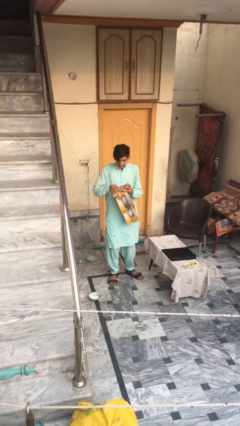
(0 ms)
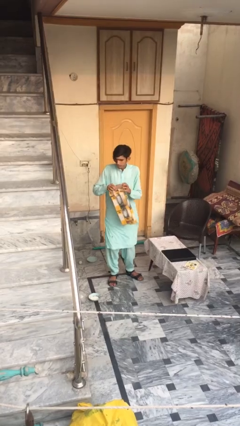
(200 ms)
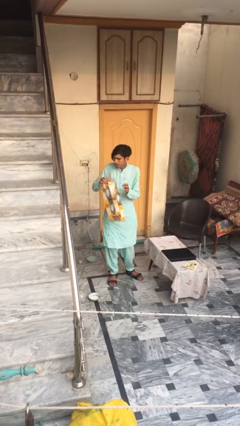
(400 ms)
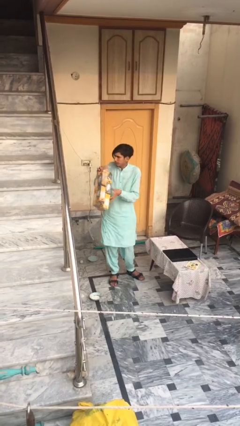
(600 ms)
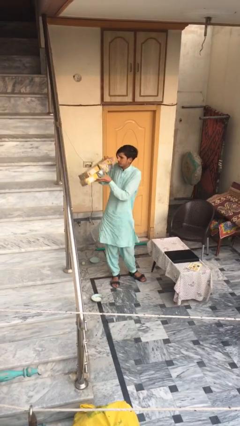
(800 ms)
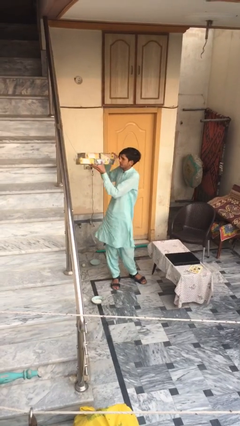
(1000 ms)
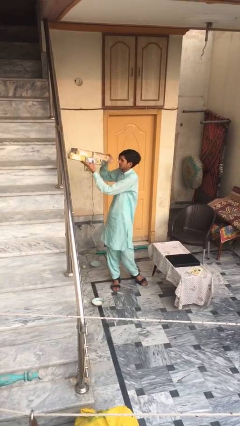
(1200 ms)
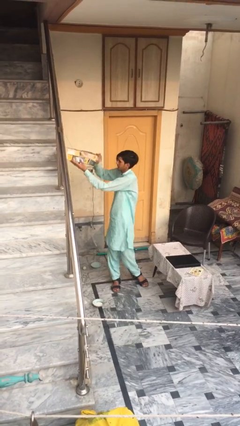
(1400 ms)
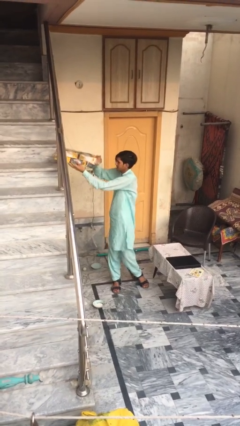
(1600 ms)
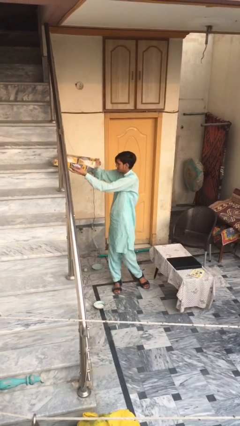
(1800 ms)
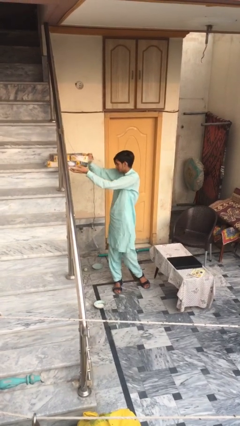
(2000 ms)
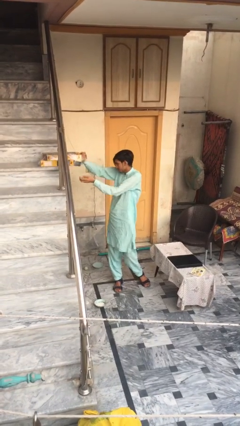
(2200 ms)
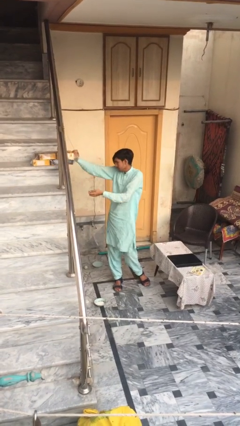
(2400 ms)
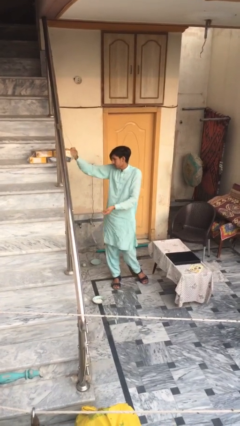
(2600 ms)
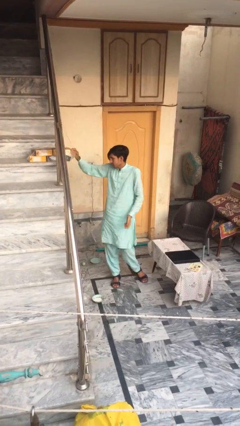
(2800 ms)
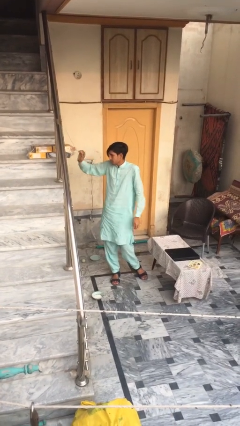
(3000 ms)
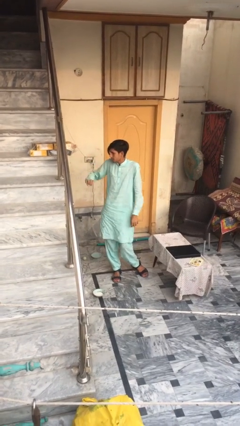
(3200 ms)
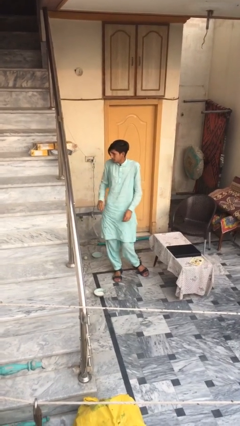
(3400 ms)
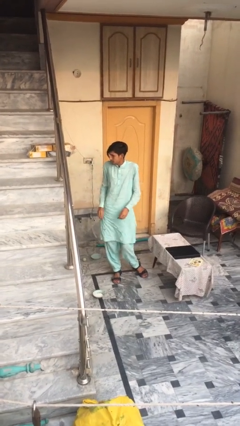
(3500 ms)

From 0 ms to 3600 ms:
person puts down object on shelf

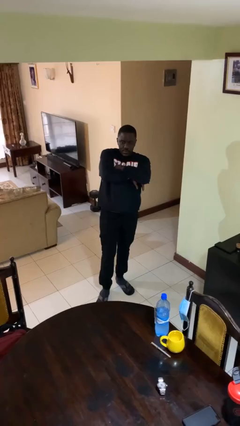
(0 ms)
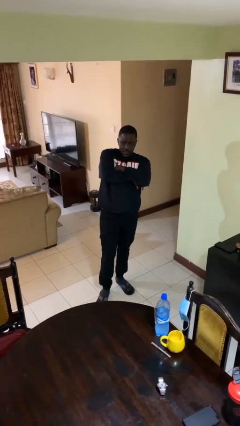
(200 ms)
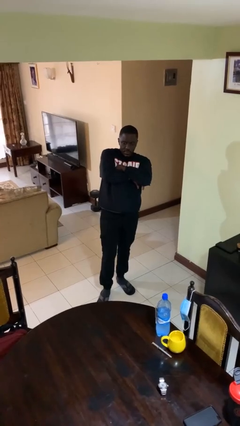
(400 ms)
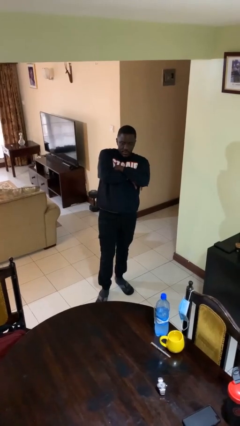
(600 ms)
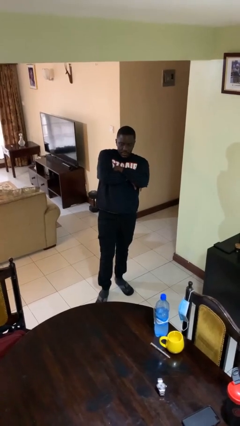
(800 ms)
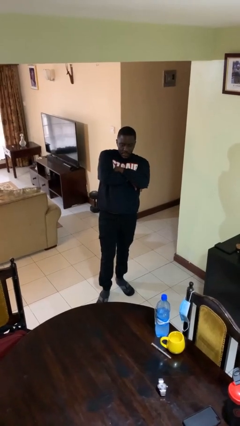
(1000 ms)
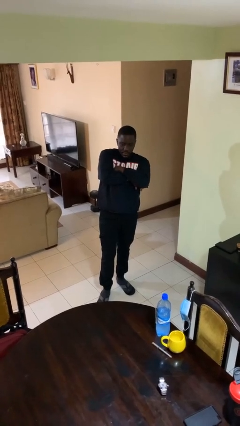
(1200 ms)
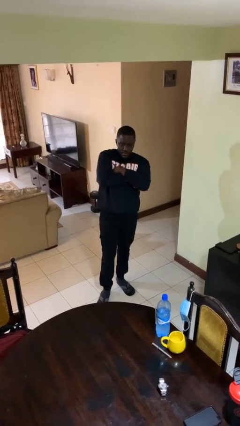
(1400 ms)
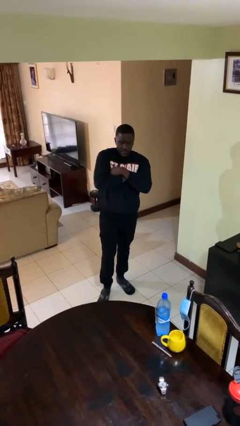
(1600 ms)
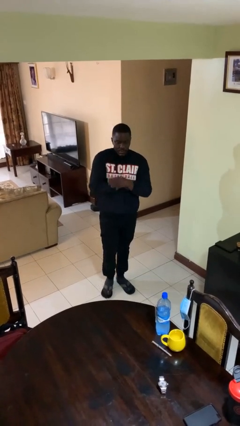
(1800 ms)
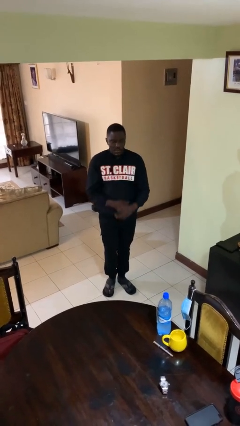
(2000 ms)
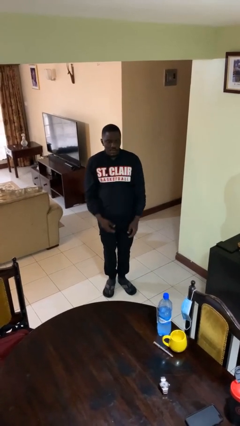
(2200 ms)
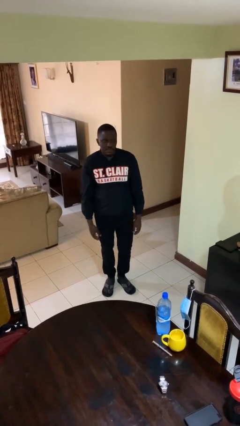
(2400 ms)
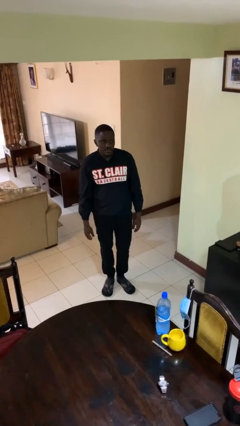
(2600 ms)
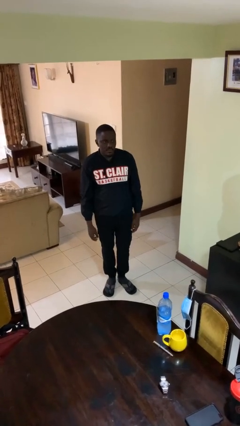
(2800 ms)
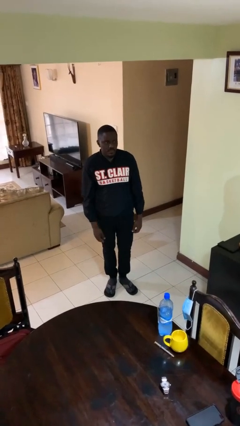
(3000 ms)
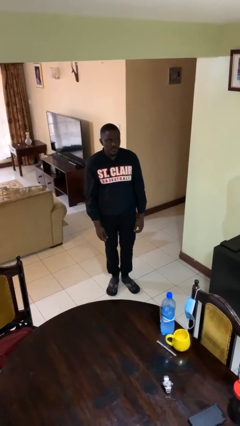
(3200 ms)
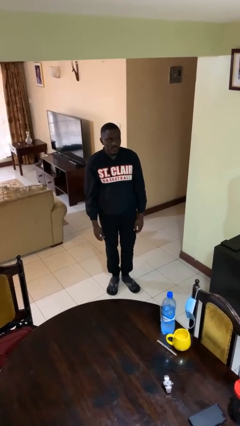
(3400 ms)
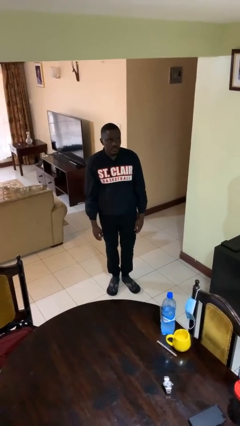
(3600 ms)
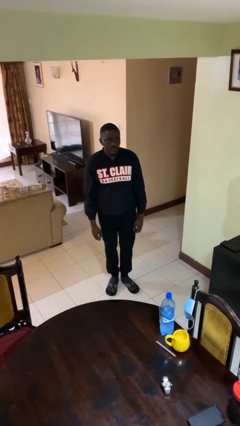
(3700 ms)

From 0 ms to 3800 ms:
person crosses arms

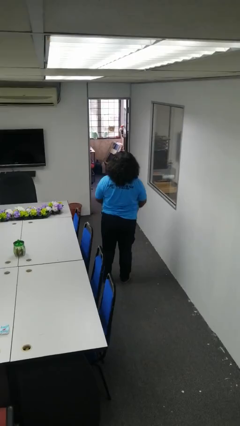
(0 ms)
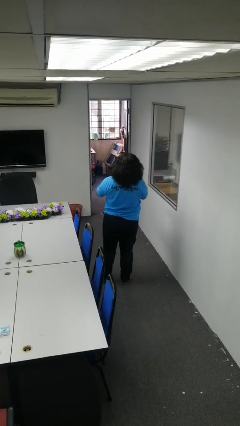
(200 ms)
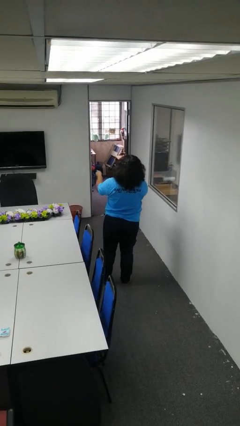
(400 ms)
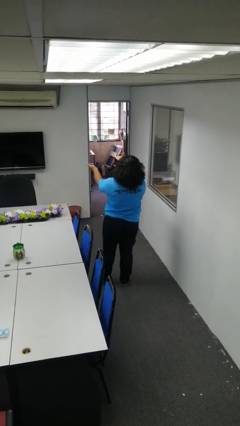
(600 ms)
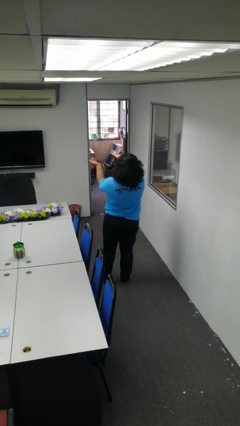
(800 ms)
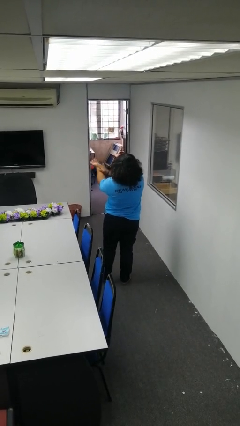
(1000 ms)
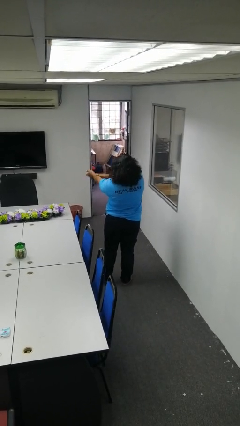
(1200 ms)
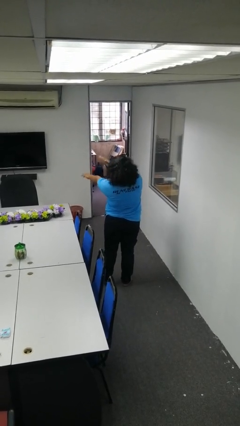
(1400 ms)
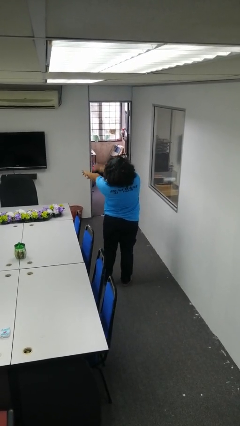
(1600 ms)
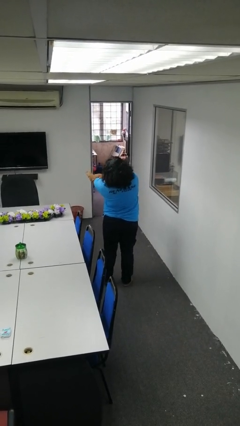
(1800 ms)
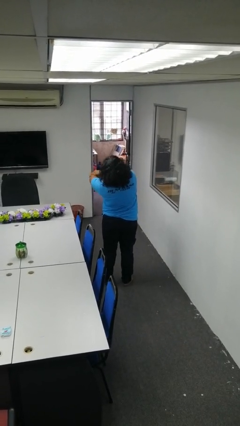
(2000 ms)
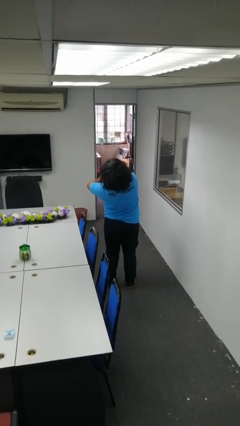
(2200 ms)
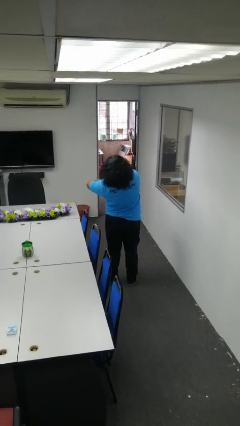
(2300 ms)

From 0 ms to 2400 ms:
person swats bug

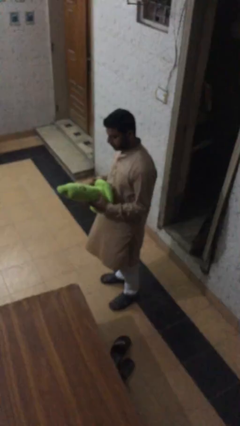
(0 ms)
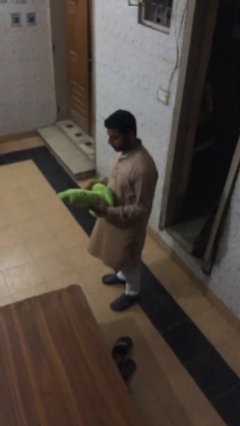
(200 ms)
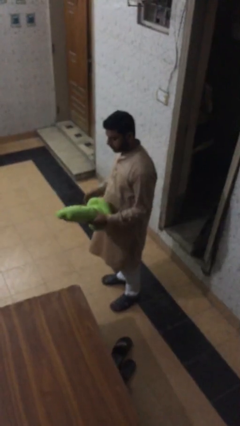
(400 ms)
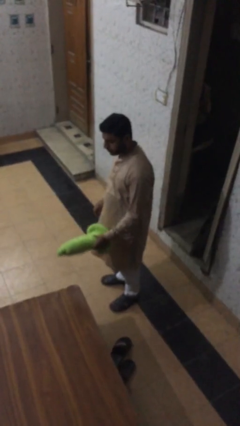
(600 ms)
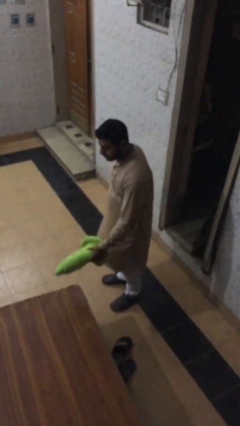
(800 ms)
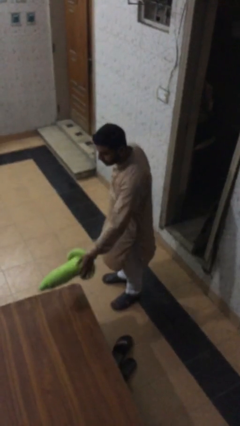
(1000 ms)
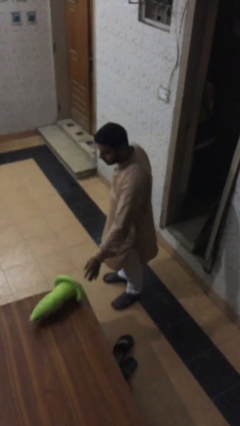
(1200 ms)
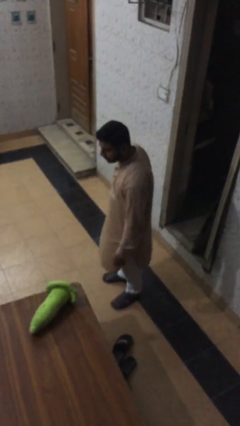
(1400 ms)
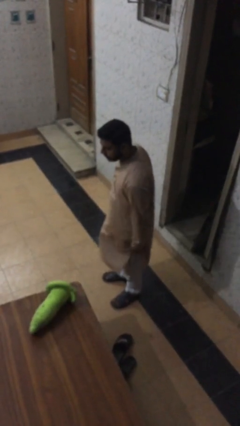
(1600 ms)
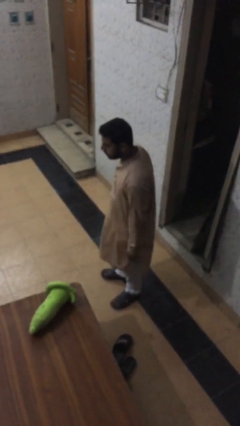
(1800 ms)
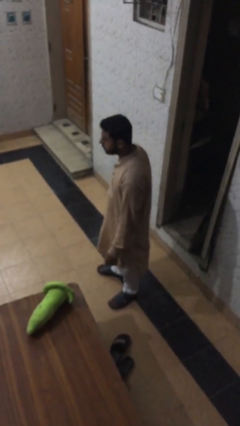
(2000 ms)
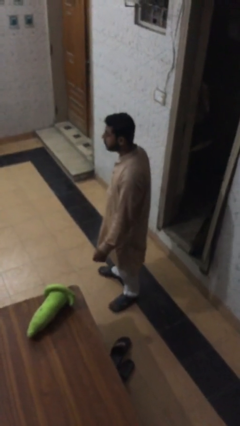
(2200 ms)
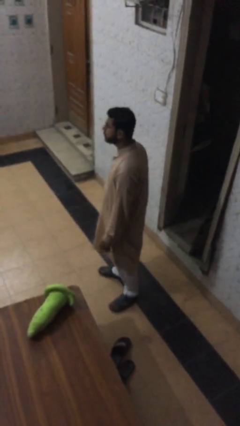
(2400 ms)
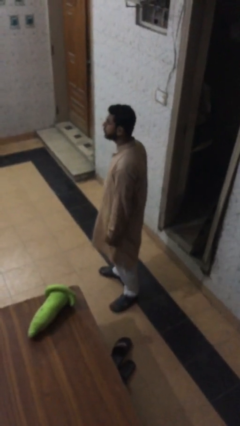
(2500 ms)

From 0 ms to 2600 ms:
person puts down object on table

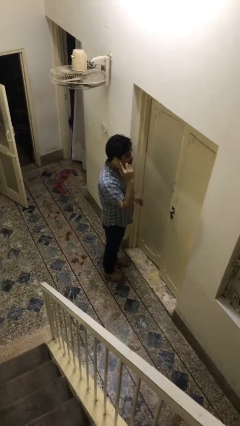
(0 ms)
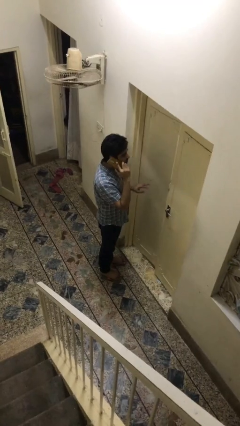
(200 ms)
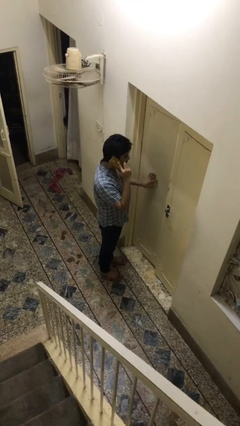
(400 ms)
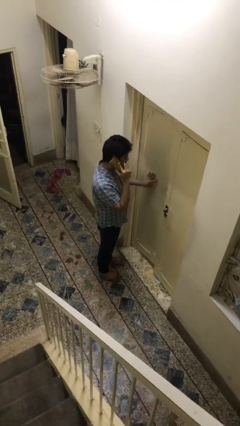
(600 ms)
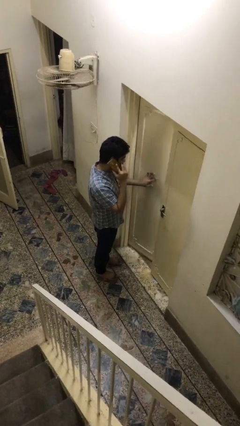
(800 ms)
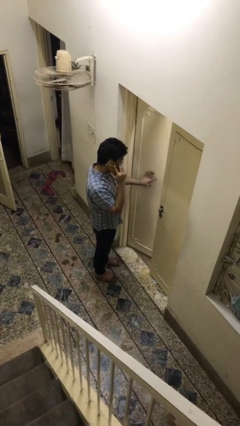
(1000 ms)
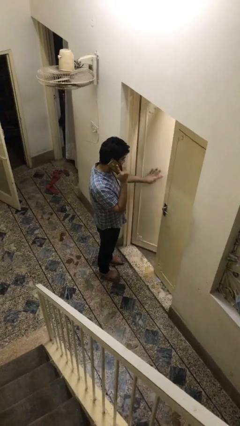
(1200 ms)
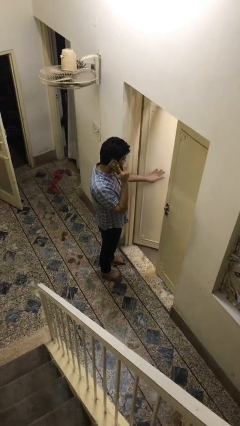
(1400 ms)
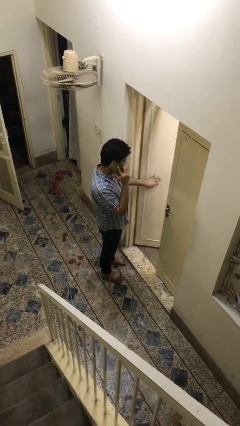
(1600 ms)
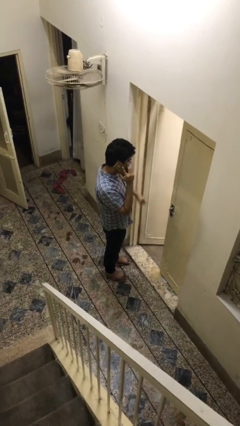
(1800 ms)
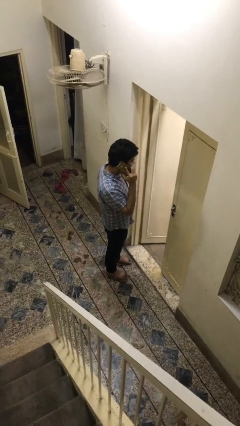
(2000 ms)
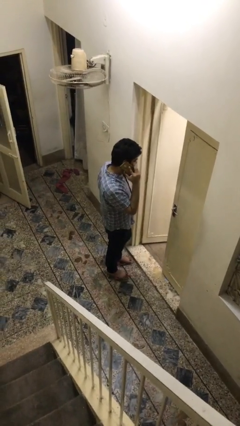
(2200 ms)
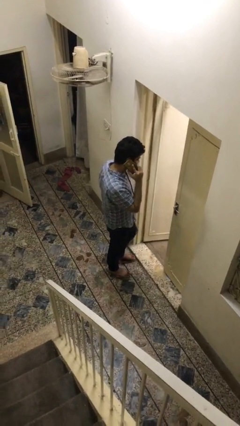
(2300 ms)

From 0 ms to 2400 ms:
person opens facility door

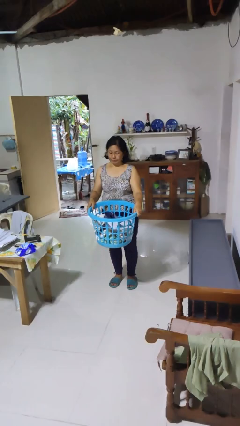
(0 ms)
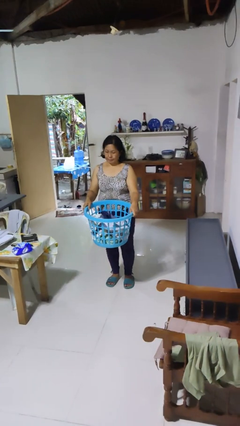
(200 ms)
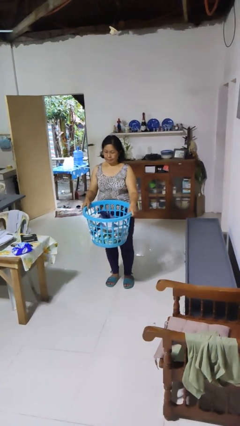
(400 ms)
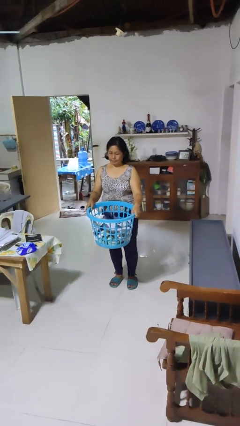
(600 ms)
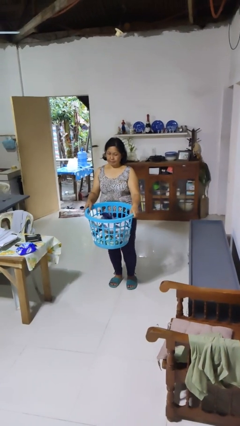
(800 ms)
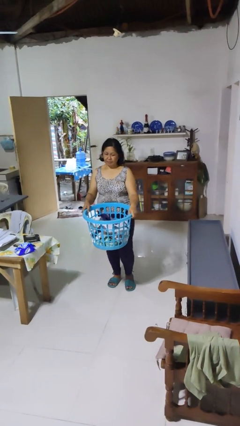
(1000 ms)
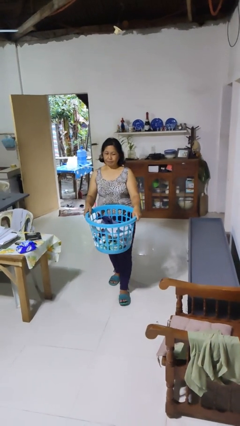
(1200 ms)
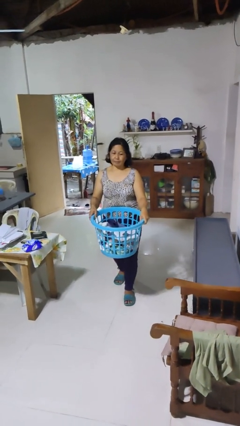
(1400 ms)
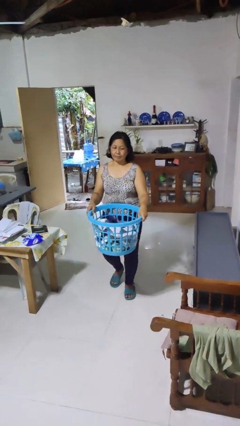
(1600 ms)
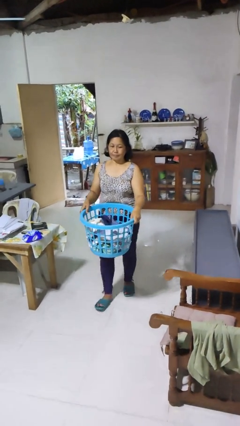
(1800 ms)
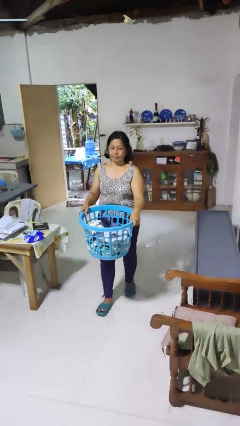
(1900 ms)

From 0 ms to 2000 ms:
person carries laundry basket

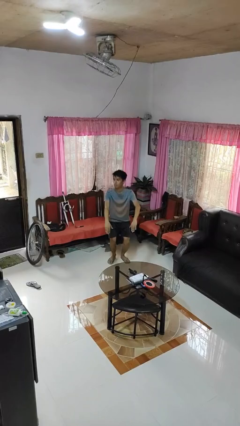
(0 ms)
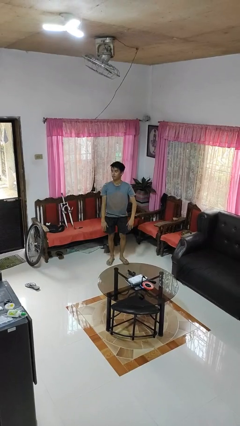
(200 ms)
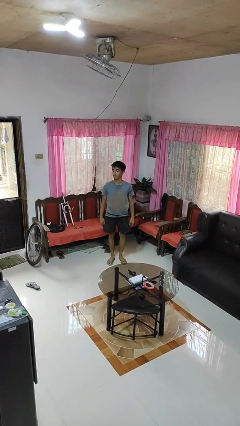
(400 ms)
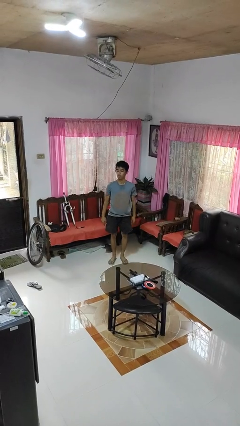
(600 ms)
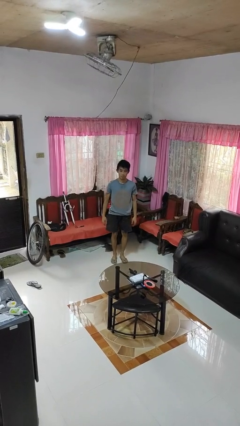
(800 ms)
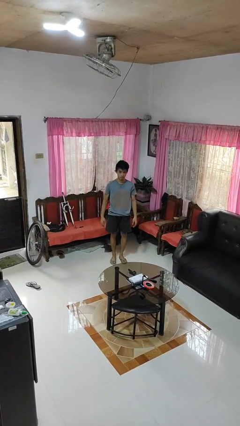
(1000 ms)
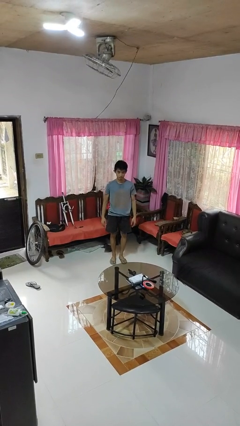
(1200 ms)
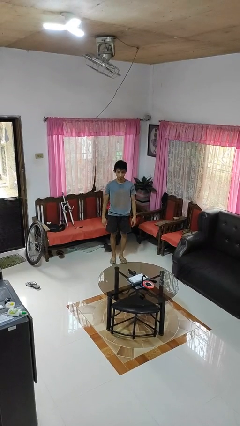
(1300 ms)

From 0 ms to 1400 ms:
person stands up
